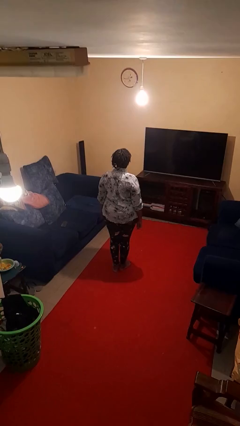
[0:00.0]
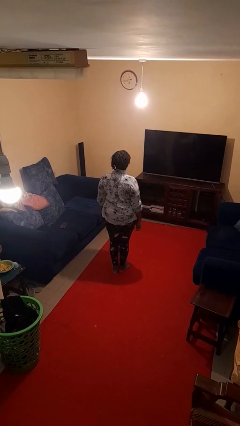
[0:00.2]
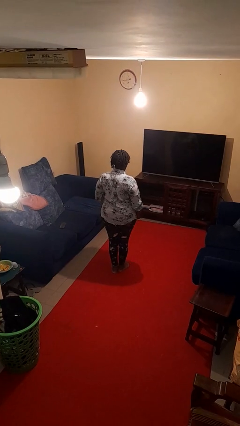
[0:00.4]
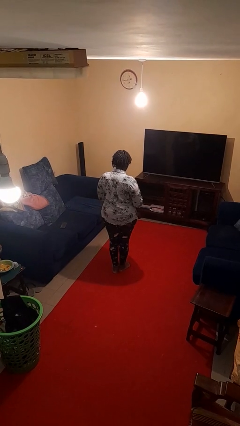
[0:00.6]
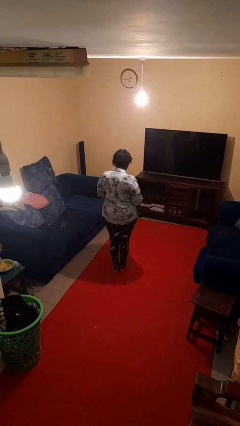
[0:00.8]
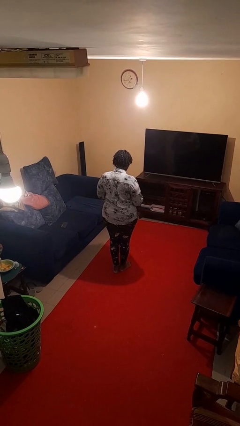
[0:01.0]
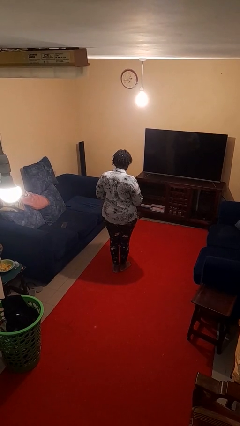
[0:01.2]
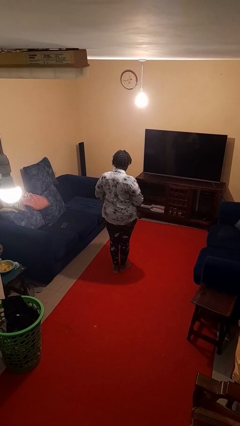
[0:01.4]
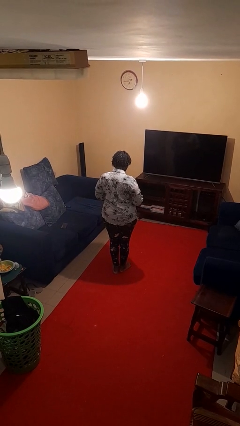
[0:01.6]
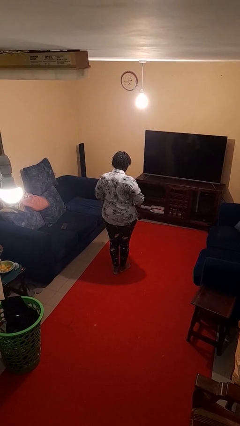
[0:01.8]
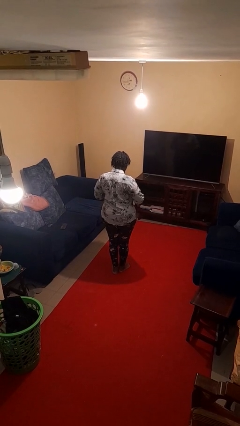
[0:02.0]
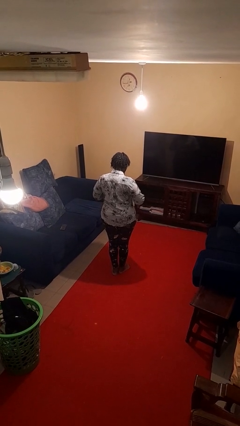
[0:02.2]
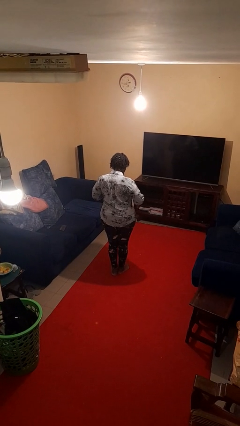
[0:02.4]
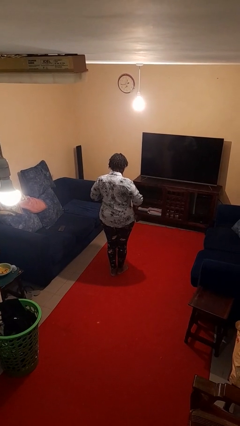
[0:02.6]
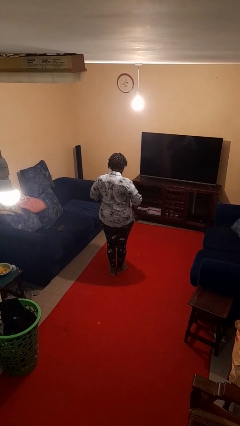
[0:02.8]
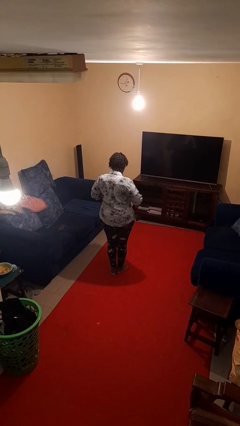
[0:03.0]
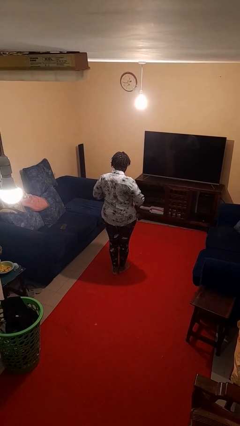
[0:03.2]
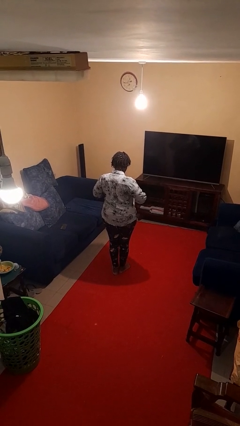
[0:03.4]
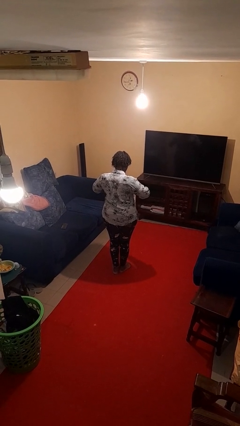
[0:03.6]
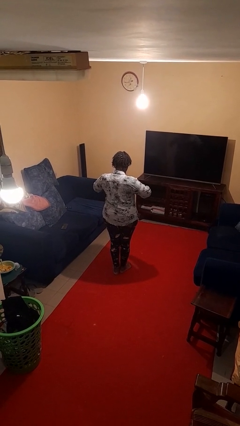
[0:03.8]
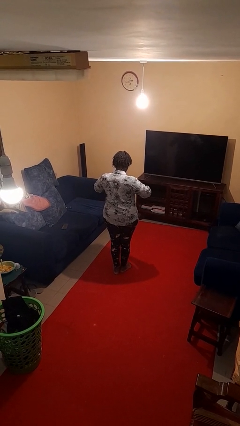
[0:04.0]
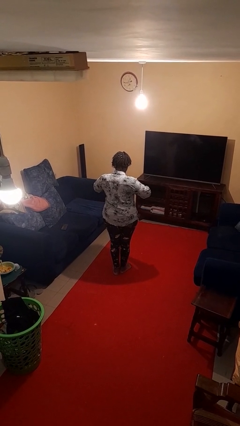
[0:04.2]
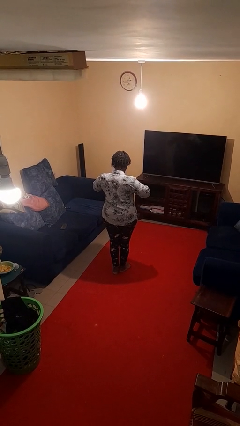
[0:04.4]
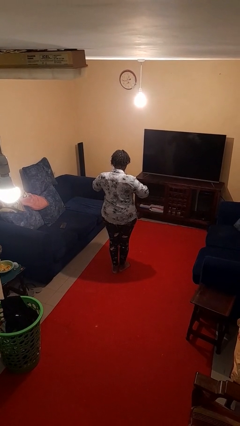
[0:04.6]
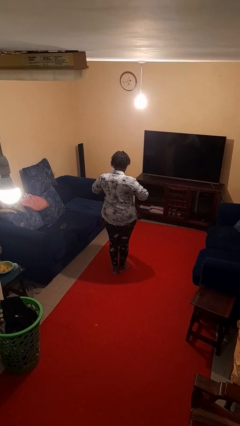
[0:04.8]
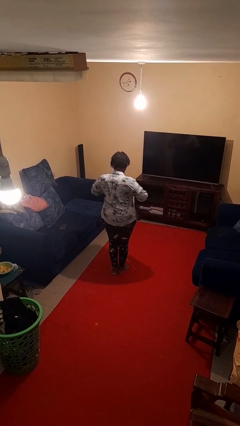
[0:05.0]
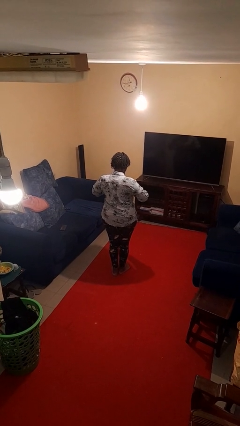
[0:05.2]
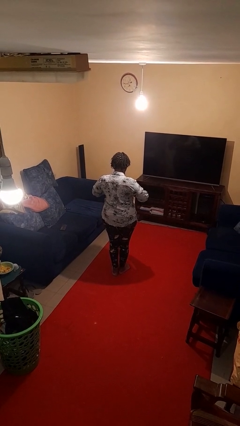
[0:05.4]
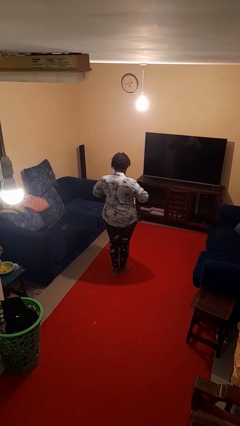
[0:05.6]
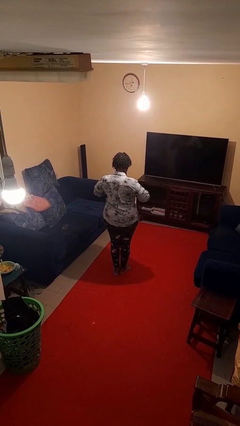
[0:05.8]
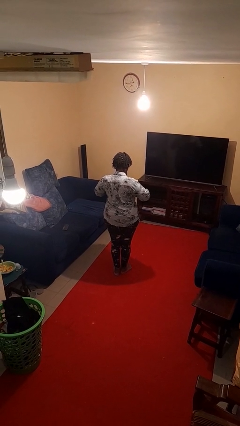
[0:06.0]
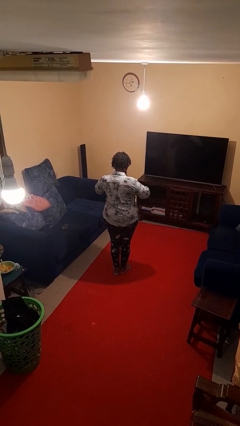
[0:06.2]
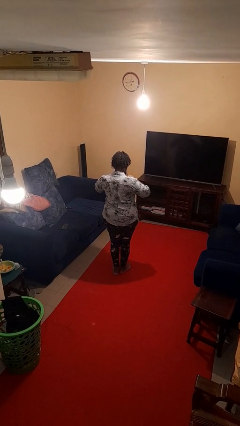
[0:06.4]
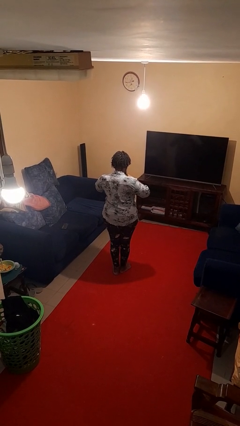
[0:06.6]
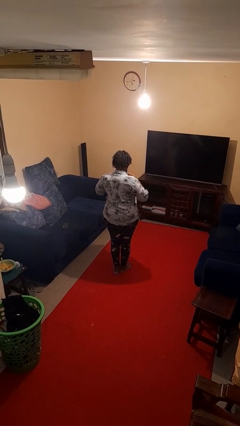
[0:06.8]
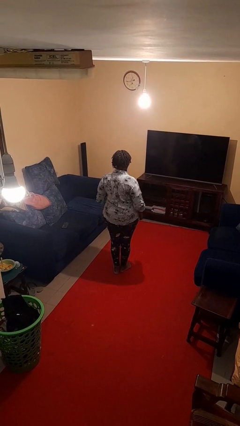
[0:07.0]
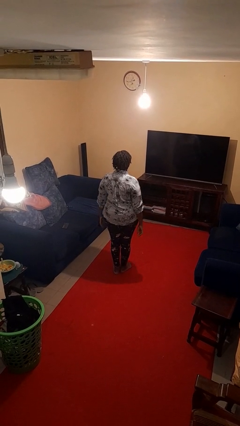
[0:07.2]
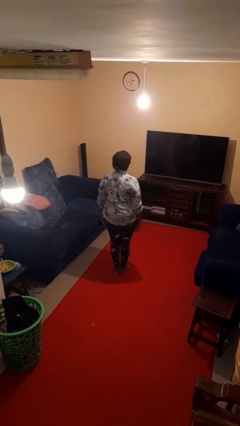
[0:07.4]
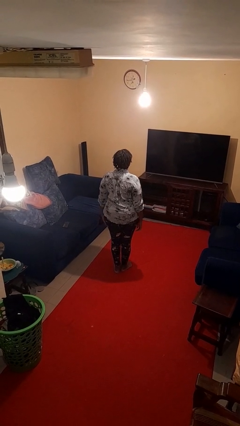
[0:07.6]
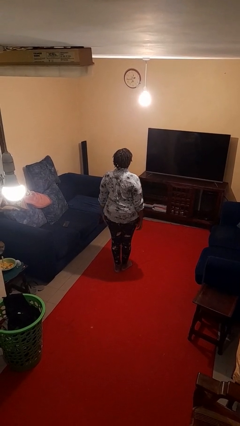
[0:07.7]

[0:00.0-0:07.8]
person unbuttons shirt

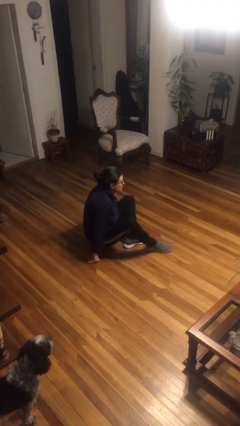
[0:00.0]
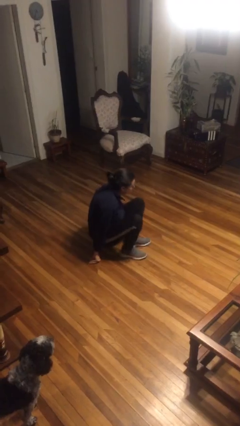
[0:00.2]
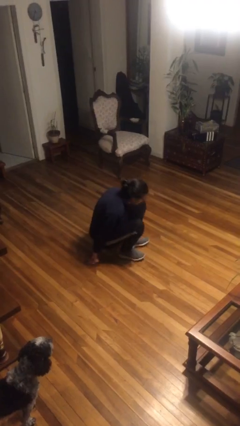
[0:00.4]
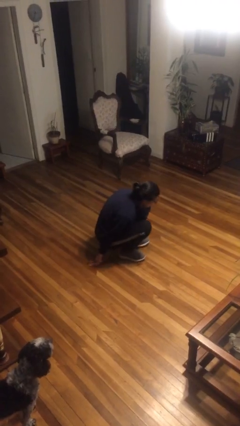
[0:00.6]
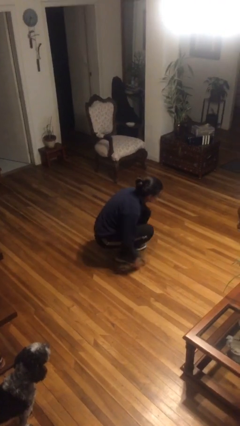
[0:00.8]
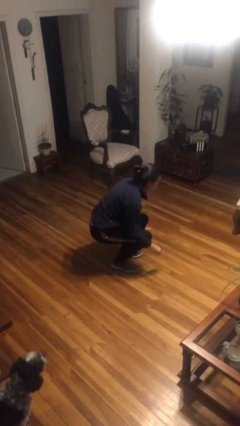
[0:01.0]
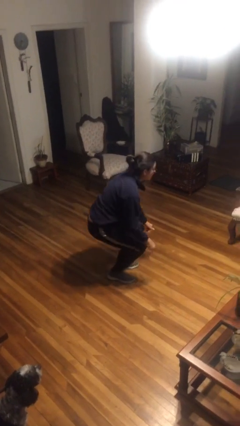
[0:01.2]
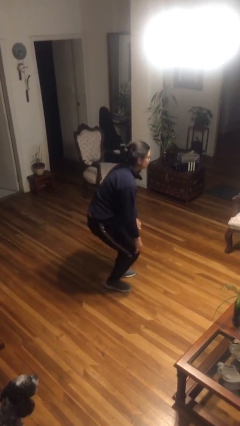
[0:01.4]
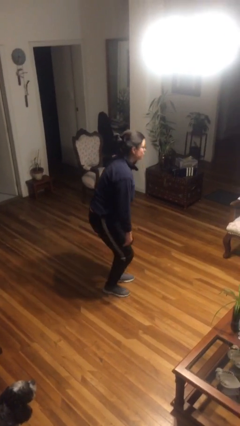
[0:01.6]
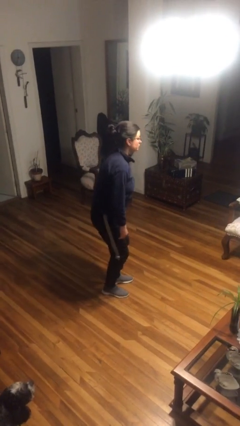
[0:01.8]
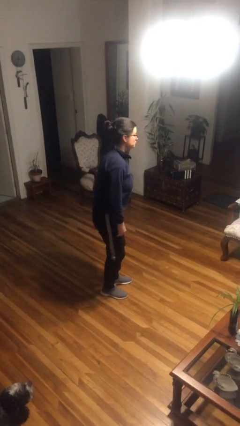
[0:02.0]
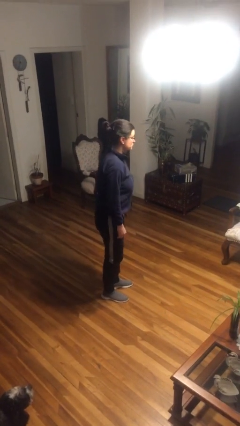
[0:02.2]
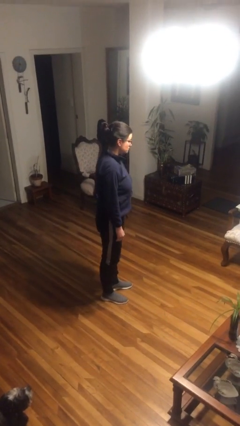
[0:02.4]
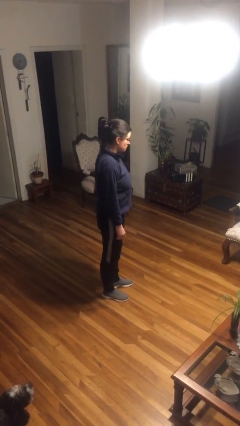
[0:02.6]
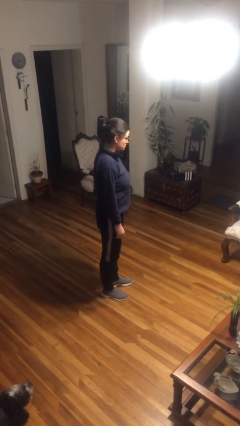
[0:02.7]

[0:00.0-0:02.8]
person stands up from floor

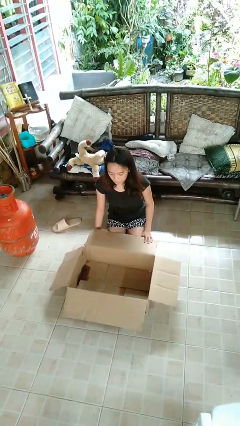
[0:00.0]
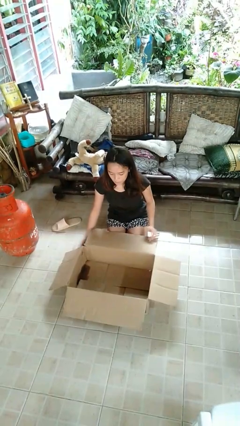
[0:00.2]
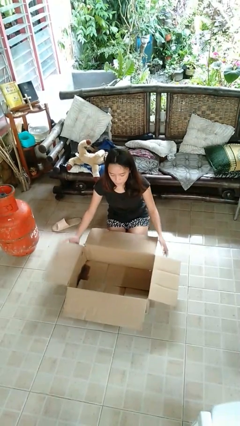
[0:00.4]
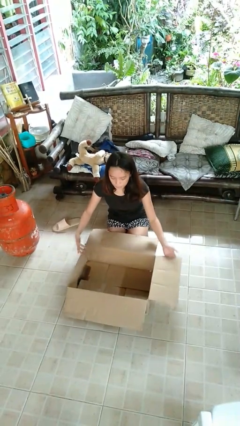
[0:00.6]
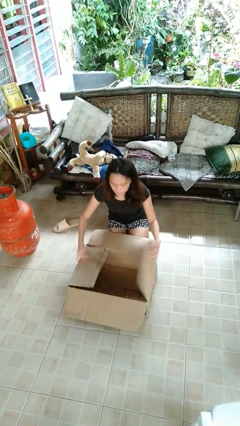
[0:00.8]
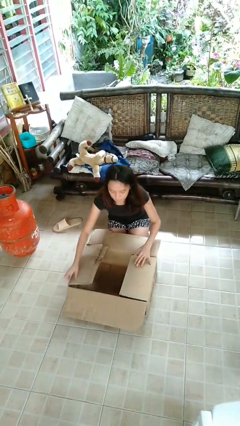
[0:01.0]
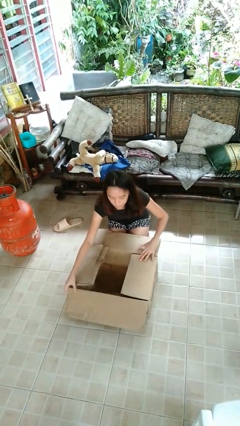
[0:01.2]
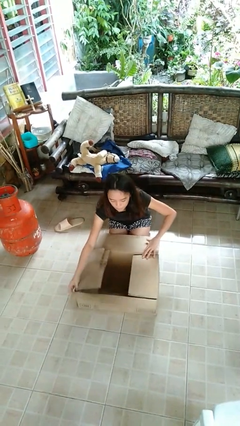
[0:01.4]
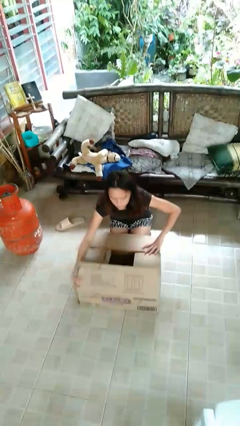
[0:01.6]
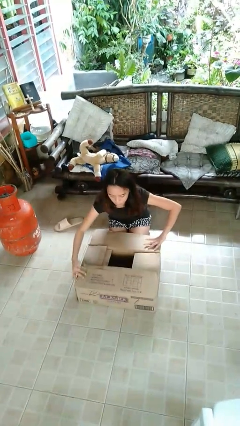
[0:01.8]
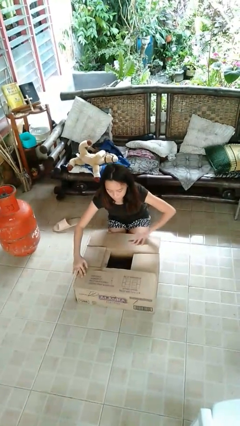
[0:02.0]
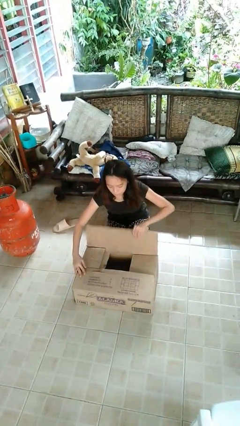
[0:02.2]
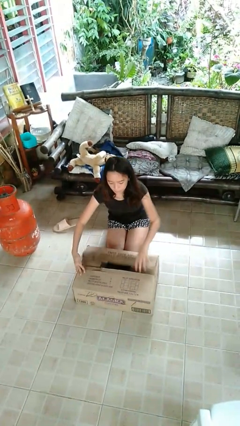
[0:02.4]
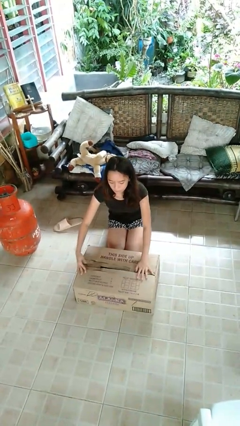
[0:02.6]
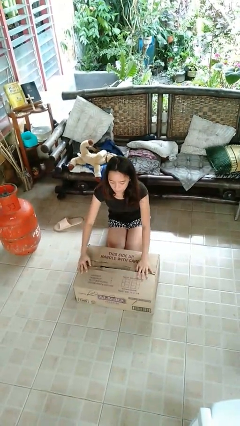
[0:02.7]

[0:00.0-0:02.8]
person closes box

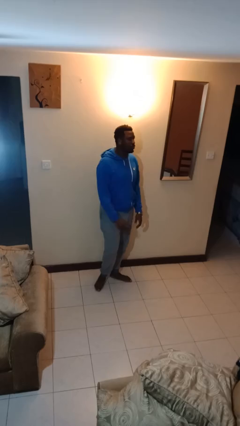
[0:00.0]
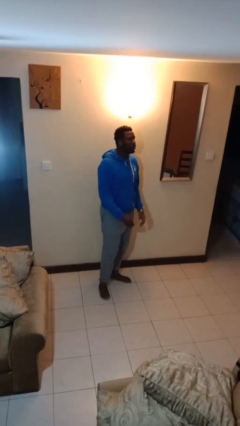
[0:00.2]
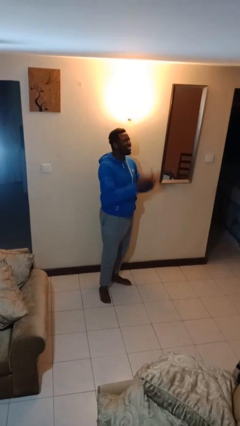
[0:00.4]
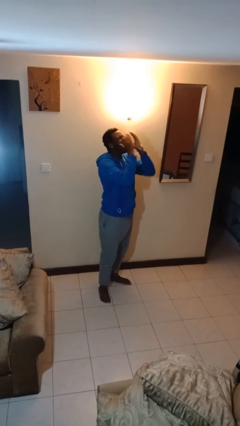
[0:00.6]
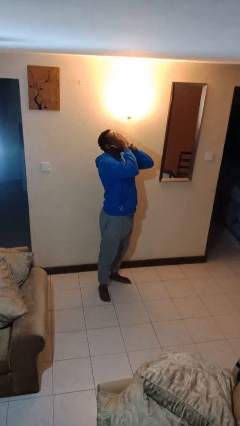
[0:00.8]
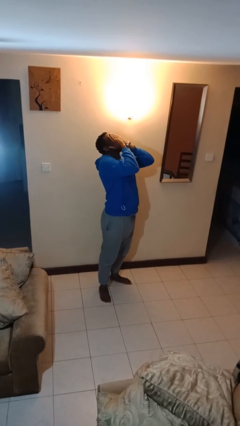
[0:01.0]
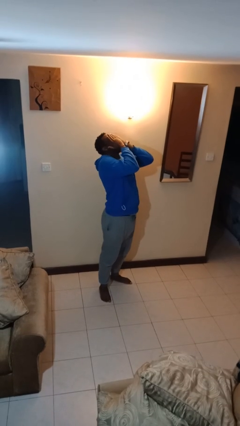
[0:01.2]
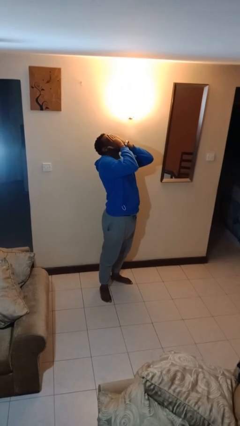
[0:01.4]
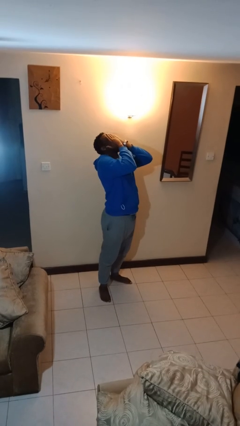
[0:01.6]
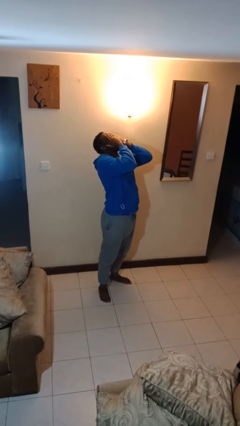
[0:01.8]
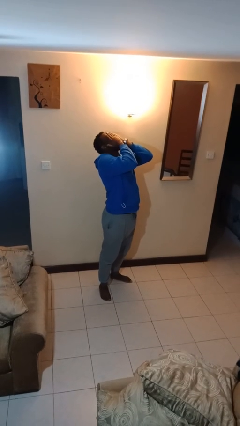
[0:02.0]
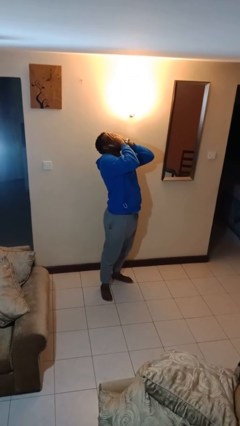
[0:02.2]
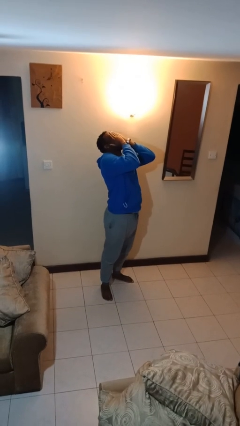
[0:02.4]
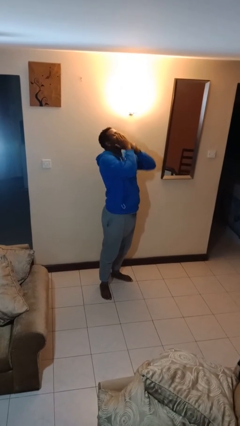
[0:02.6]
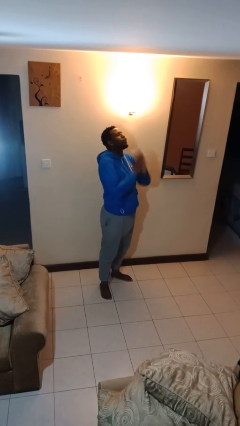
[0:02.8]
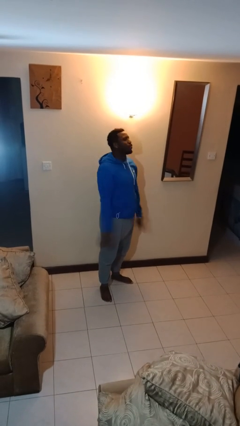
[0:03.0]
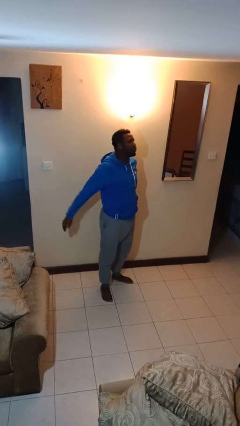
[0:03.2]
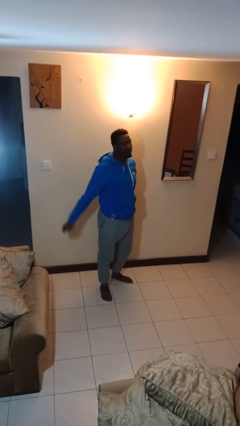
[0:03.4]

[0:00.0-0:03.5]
person covers face with hands

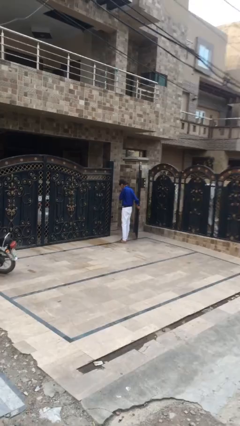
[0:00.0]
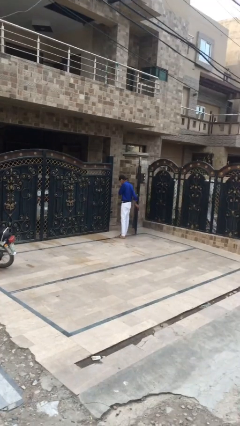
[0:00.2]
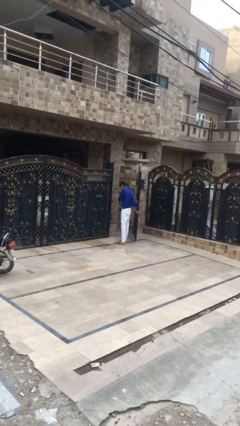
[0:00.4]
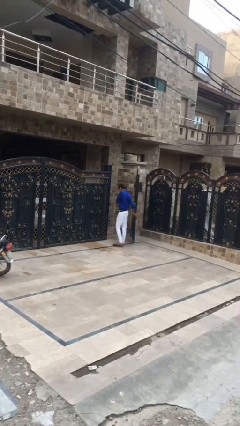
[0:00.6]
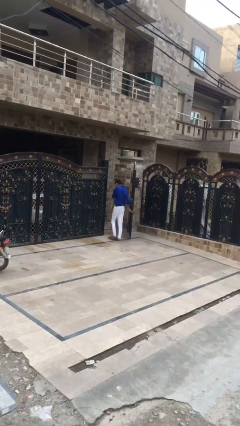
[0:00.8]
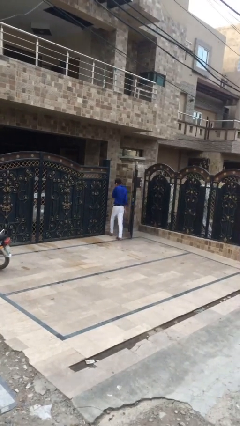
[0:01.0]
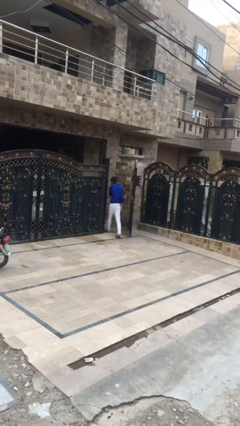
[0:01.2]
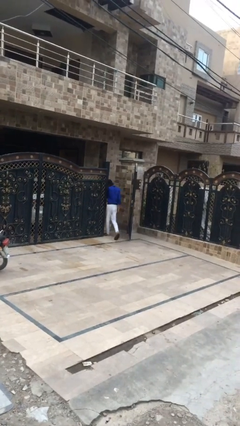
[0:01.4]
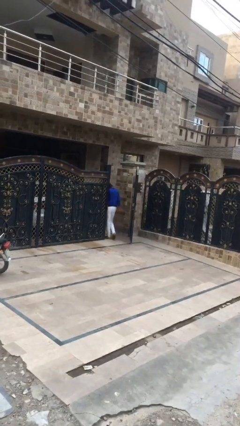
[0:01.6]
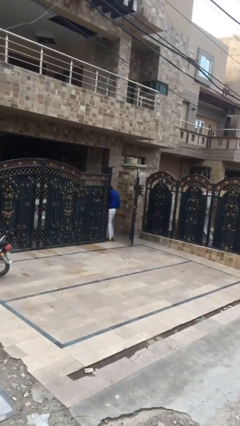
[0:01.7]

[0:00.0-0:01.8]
person exits scene through structure
